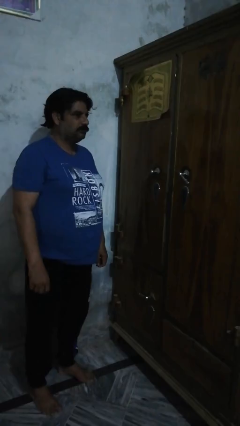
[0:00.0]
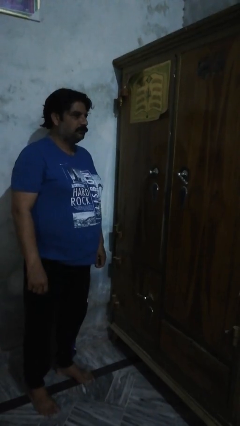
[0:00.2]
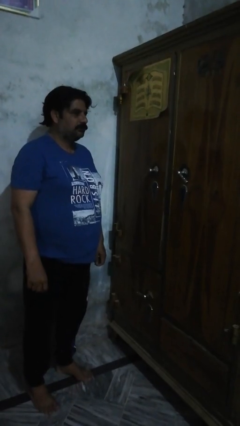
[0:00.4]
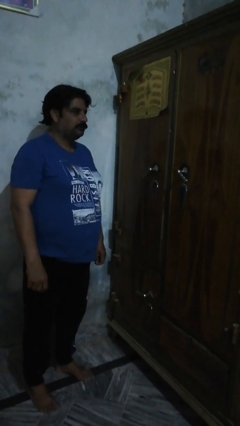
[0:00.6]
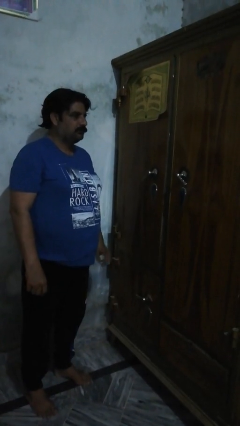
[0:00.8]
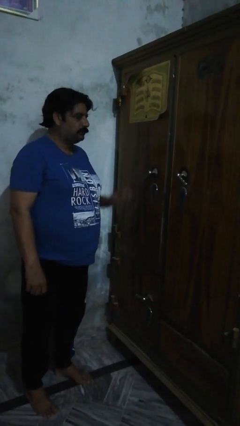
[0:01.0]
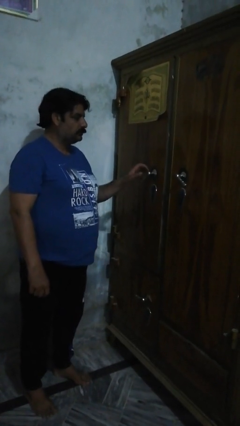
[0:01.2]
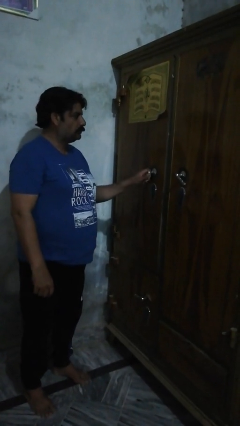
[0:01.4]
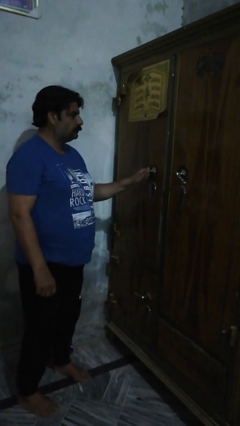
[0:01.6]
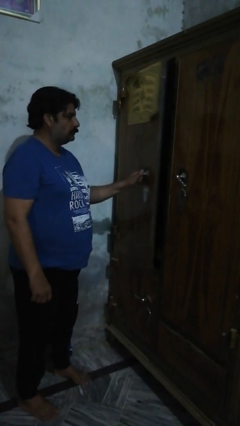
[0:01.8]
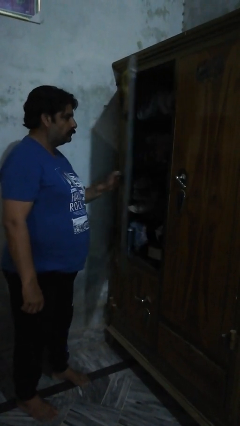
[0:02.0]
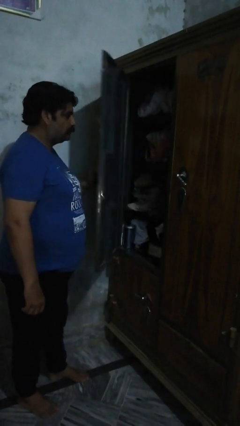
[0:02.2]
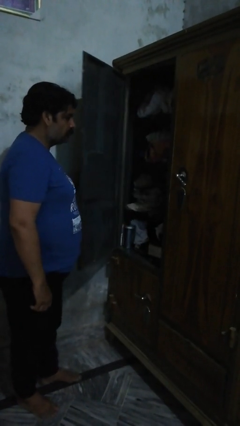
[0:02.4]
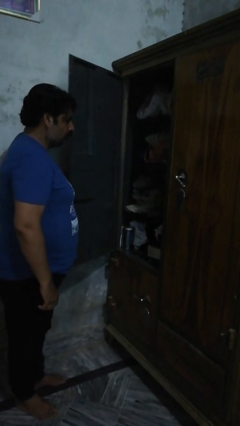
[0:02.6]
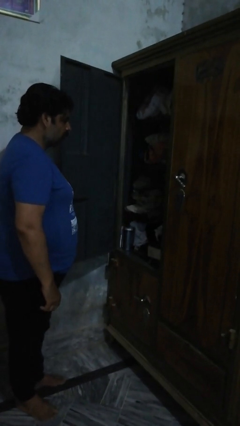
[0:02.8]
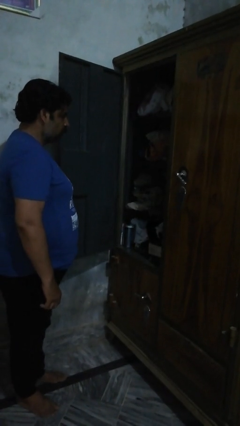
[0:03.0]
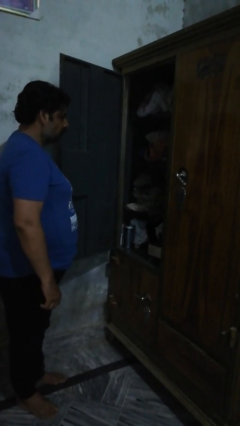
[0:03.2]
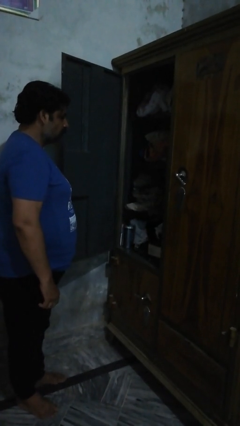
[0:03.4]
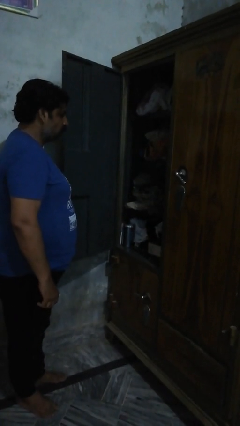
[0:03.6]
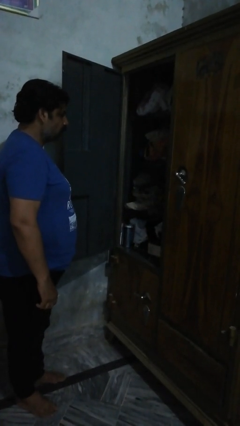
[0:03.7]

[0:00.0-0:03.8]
person opens dresser drawer

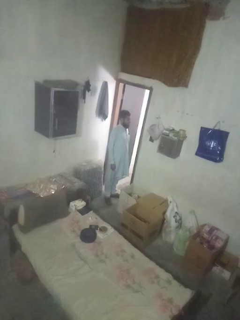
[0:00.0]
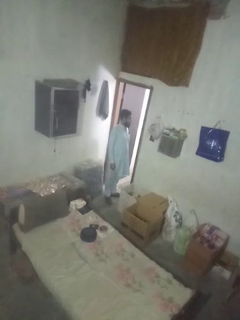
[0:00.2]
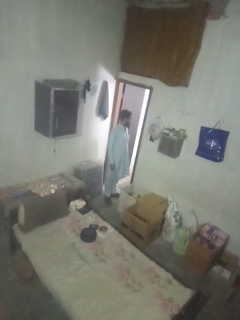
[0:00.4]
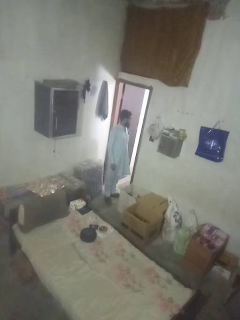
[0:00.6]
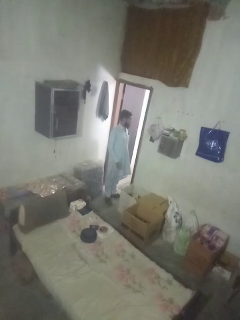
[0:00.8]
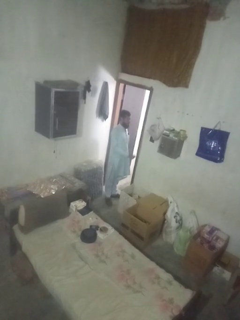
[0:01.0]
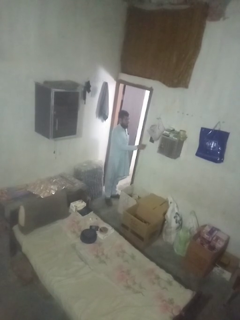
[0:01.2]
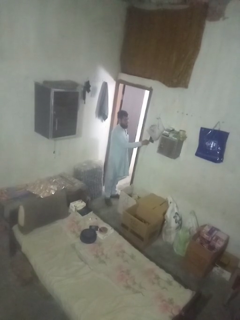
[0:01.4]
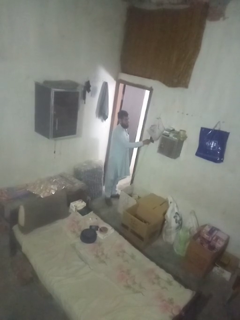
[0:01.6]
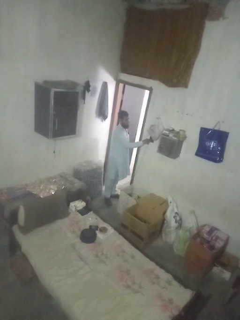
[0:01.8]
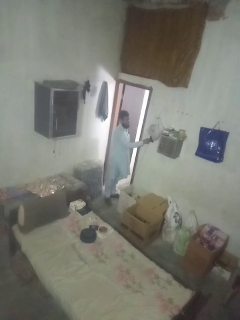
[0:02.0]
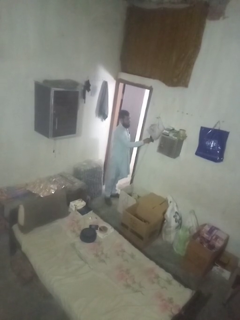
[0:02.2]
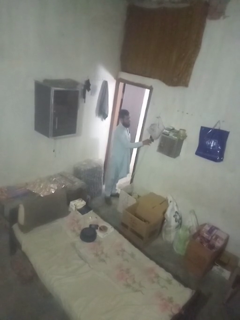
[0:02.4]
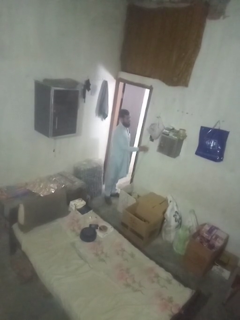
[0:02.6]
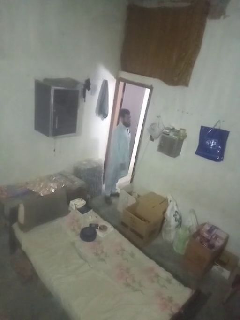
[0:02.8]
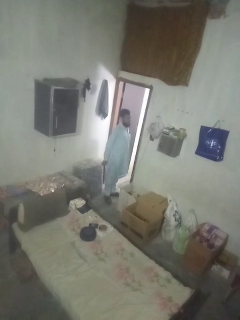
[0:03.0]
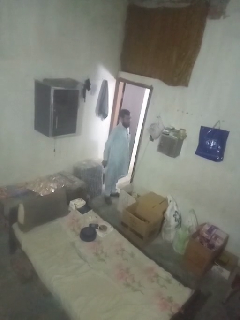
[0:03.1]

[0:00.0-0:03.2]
person plugs into electrical socket

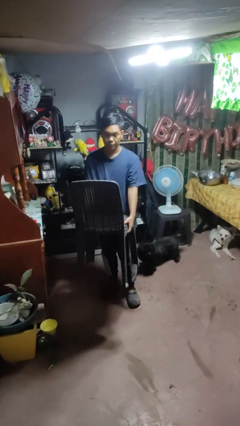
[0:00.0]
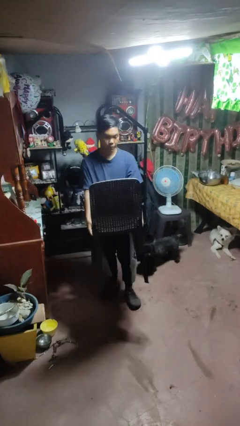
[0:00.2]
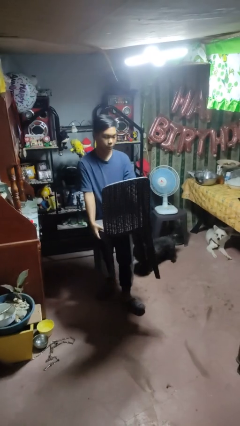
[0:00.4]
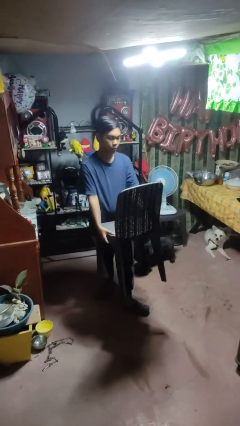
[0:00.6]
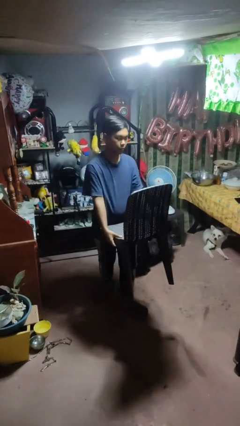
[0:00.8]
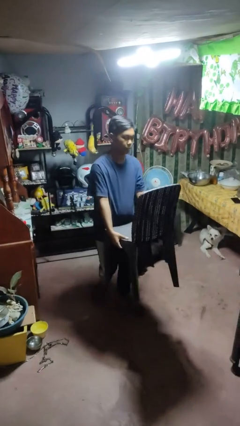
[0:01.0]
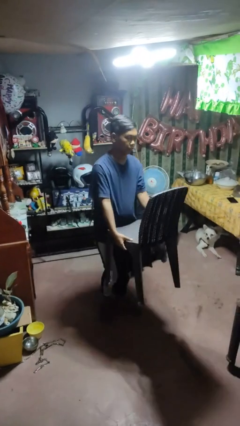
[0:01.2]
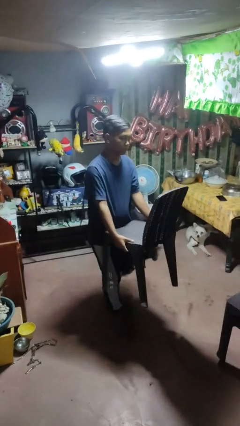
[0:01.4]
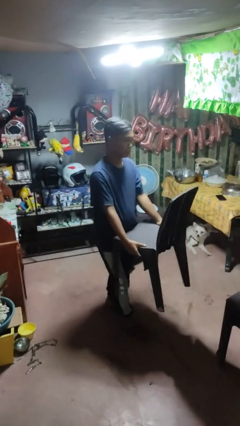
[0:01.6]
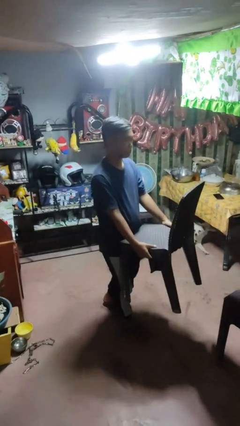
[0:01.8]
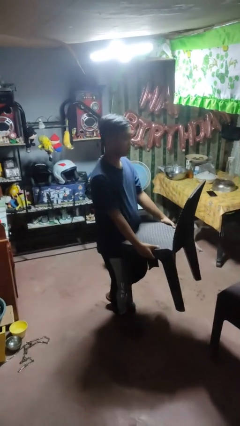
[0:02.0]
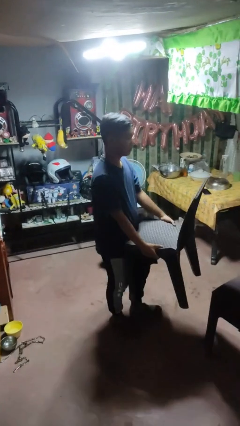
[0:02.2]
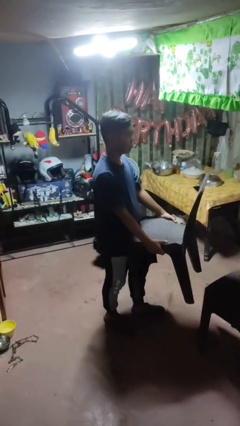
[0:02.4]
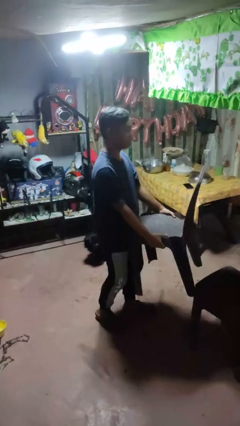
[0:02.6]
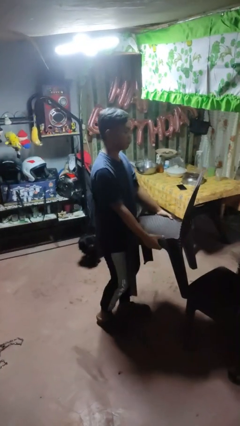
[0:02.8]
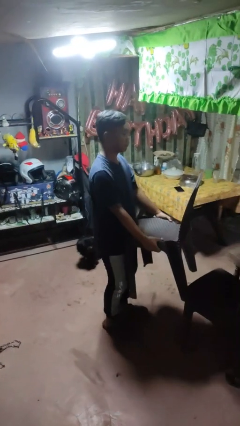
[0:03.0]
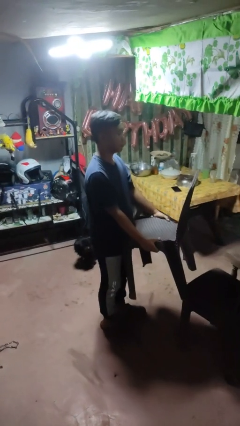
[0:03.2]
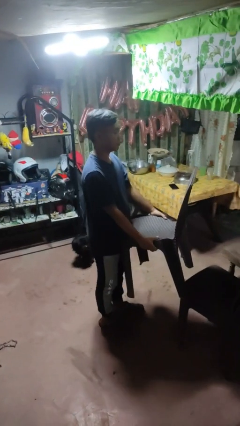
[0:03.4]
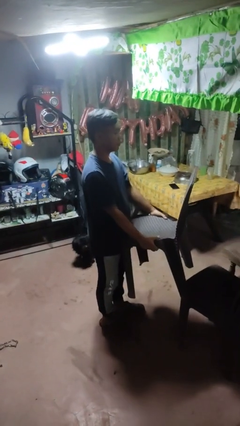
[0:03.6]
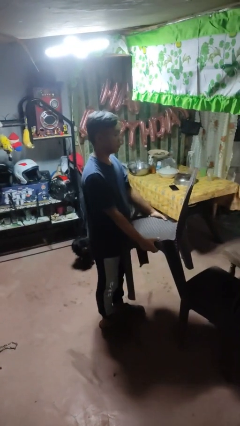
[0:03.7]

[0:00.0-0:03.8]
person carries furniture

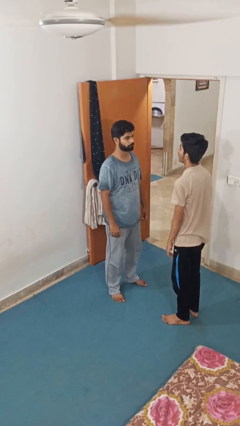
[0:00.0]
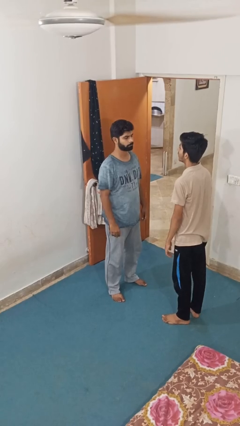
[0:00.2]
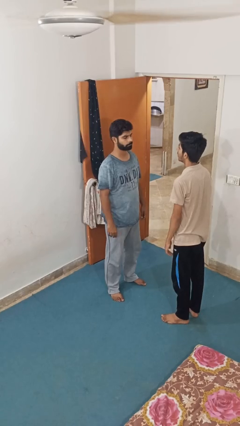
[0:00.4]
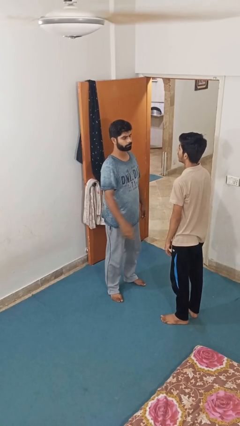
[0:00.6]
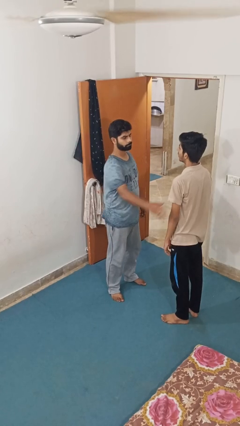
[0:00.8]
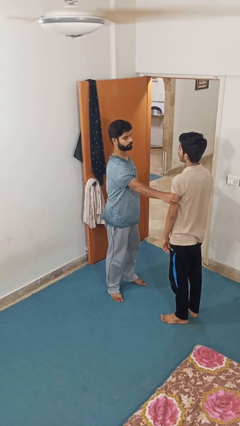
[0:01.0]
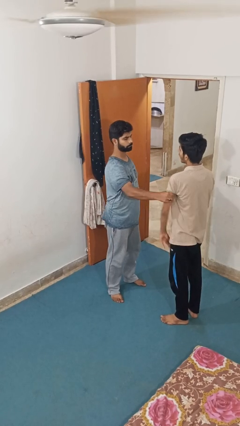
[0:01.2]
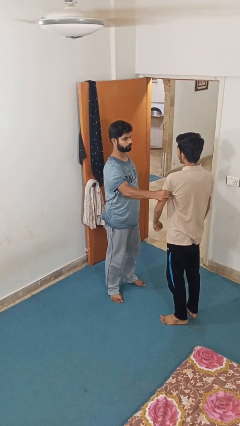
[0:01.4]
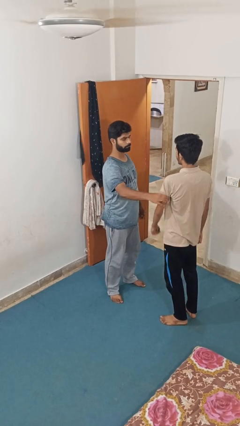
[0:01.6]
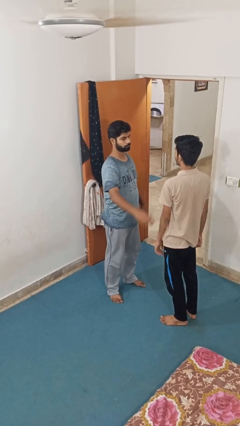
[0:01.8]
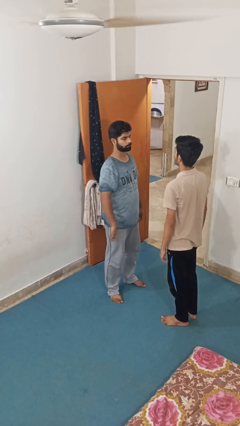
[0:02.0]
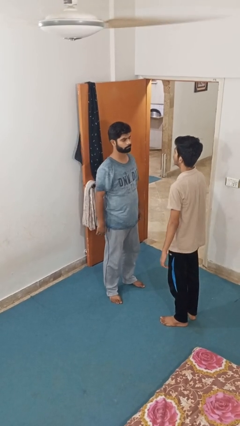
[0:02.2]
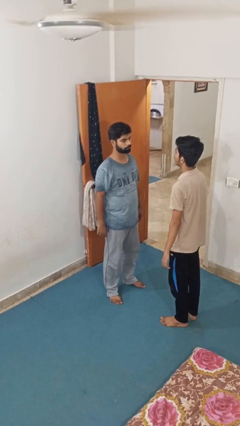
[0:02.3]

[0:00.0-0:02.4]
person grabs person by bicep

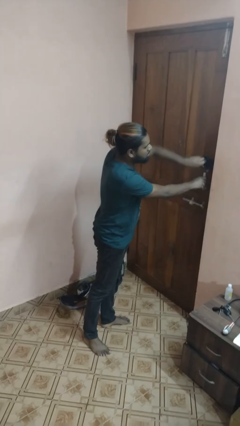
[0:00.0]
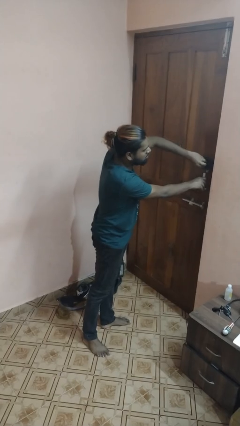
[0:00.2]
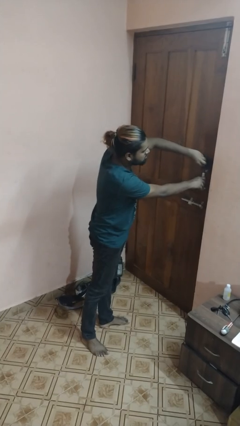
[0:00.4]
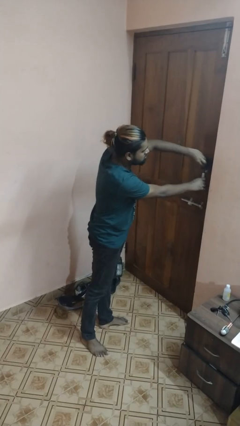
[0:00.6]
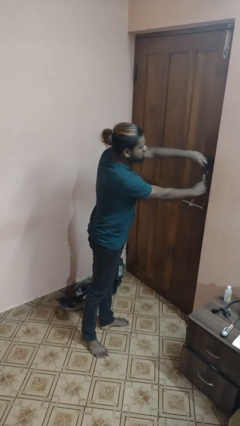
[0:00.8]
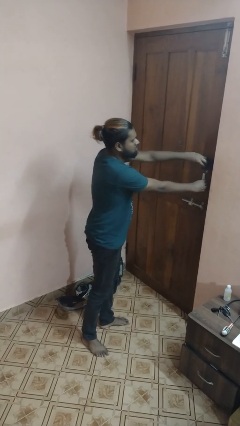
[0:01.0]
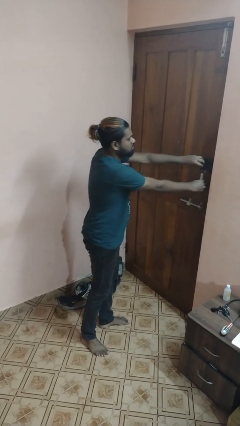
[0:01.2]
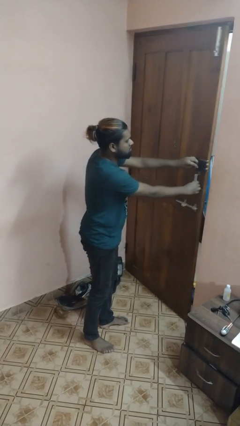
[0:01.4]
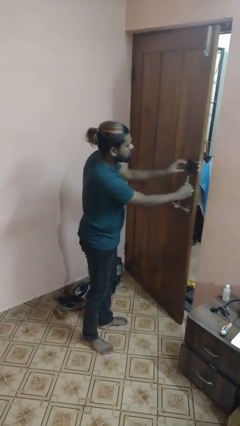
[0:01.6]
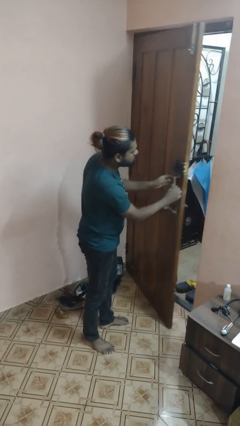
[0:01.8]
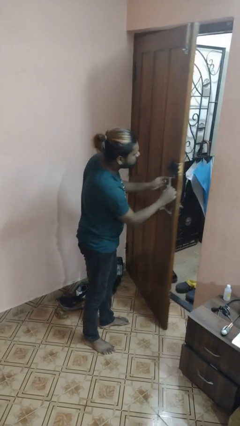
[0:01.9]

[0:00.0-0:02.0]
person unlocks door with keys

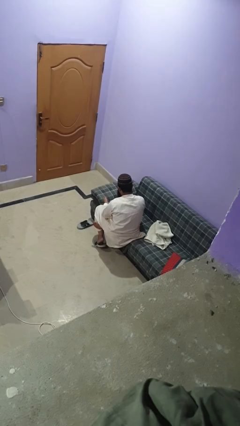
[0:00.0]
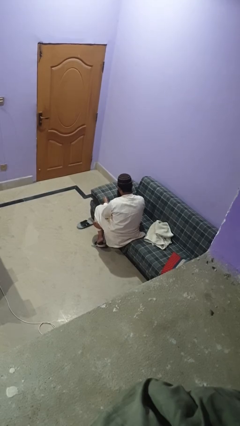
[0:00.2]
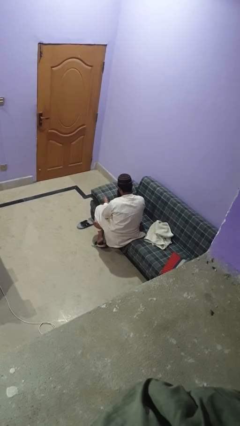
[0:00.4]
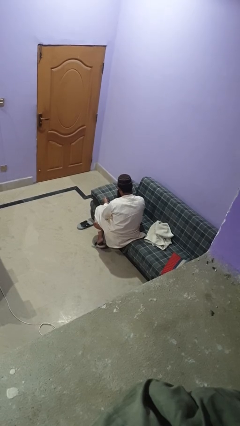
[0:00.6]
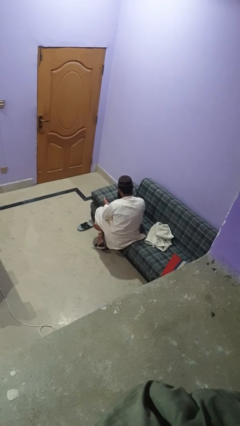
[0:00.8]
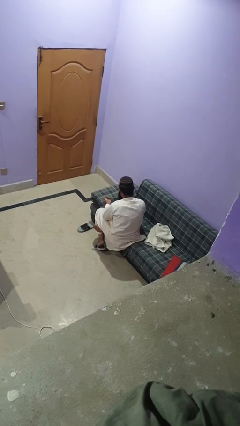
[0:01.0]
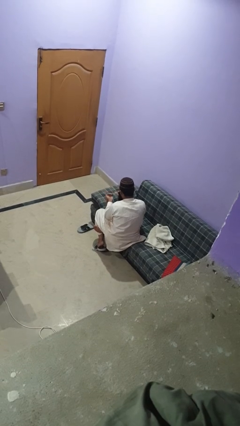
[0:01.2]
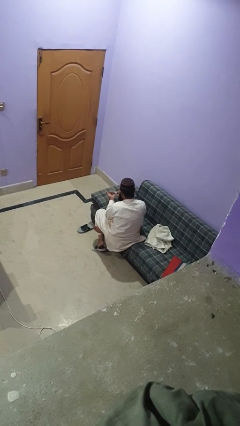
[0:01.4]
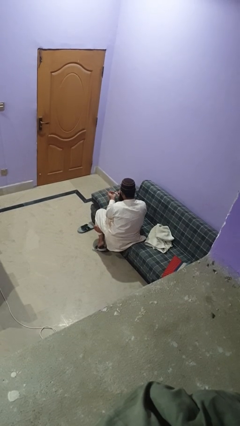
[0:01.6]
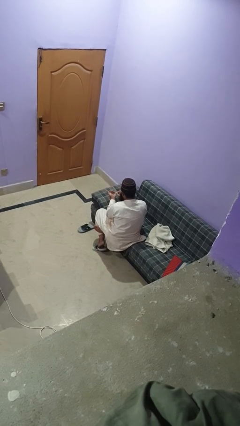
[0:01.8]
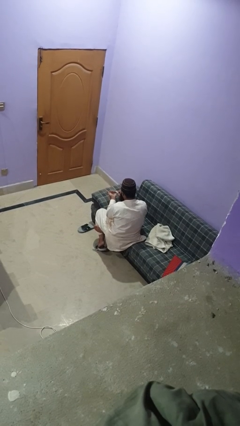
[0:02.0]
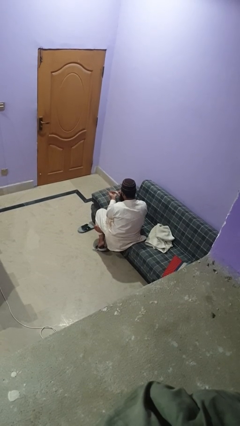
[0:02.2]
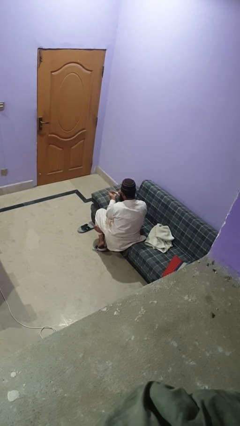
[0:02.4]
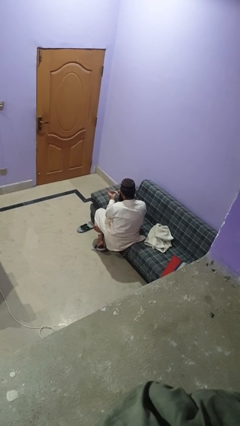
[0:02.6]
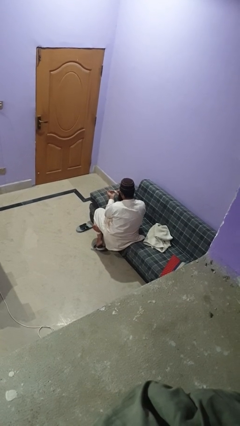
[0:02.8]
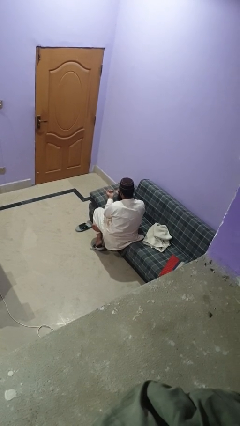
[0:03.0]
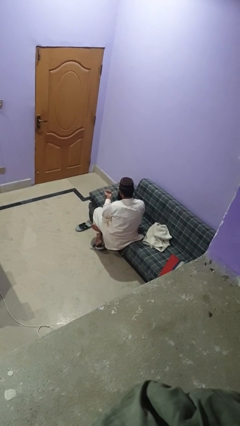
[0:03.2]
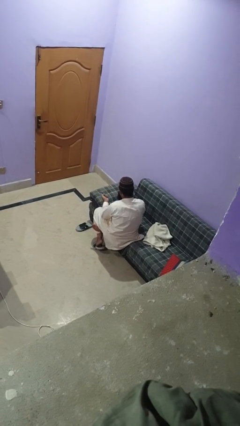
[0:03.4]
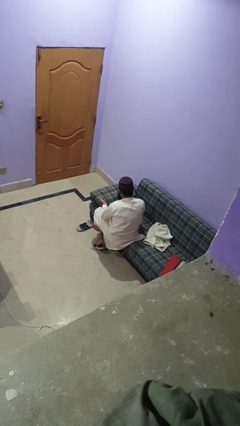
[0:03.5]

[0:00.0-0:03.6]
person paints fingernails
